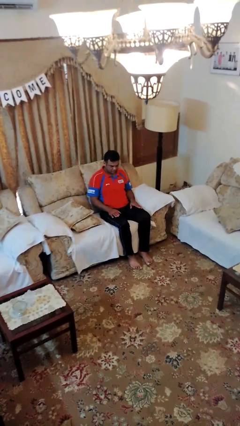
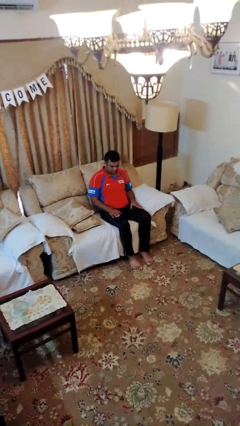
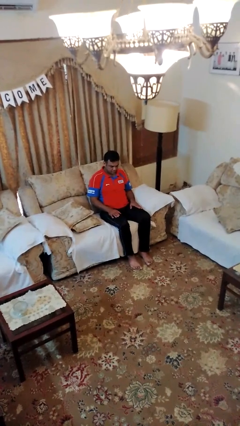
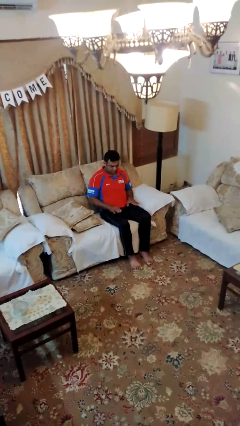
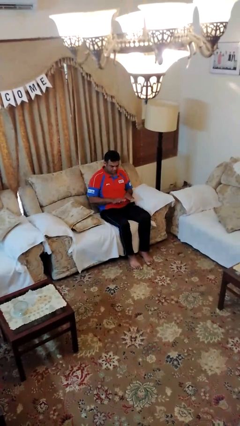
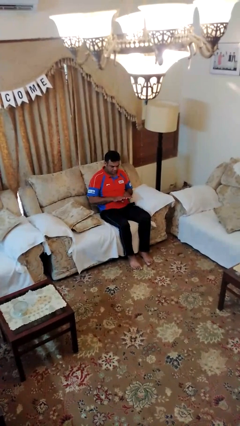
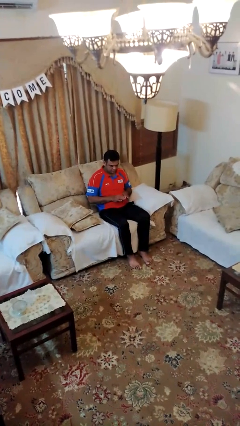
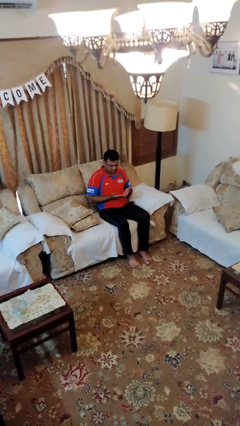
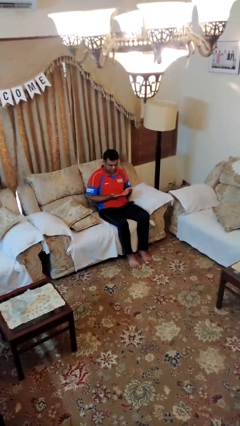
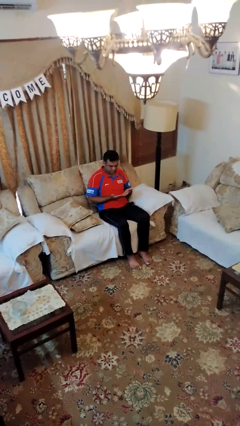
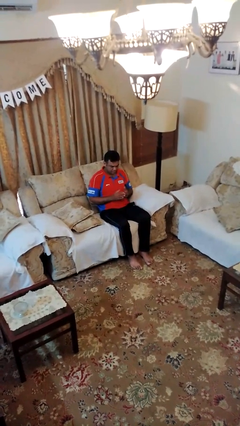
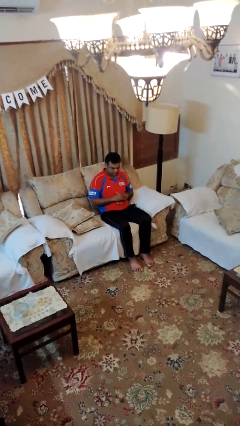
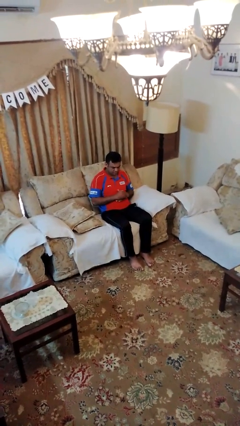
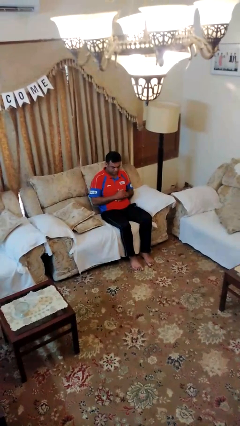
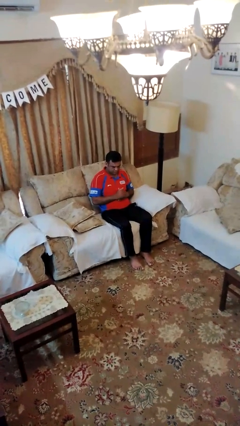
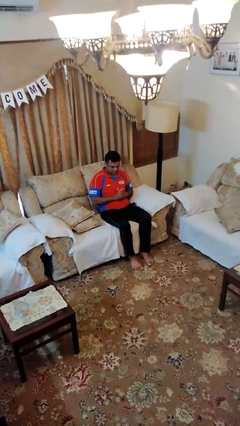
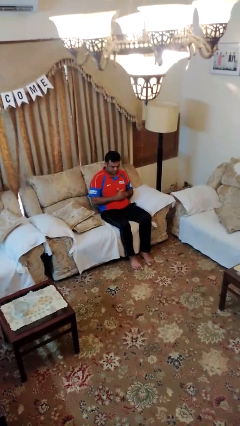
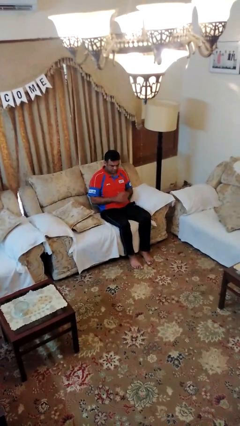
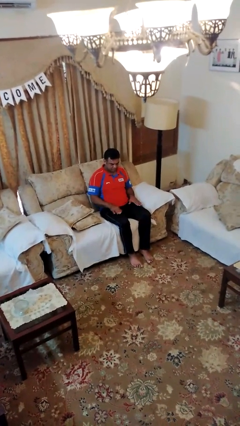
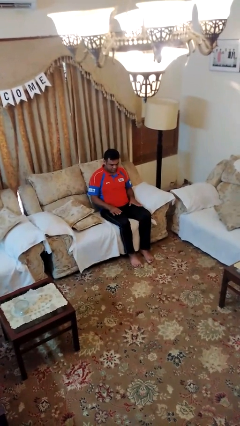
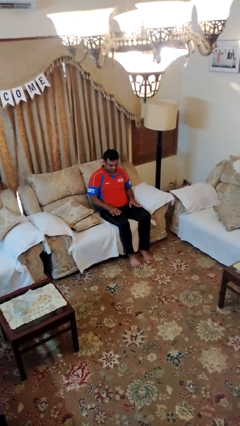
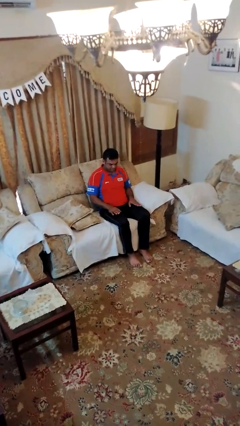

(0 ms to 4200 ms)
person looks at hands in lap

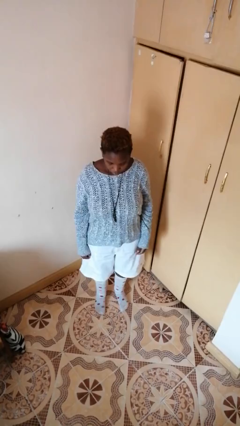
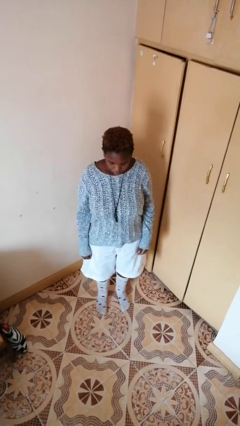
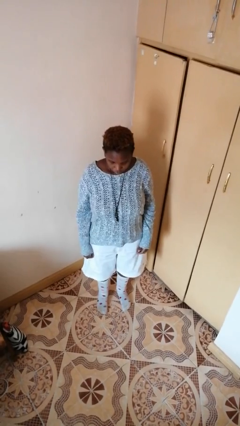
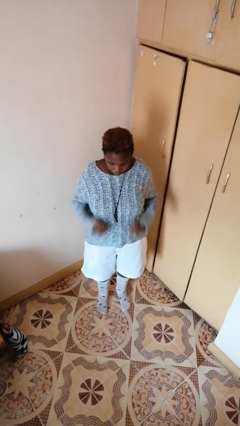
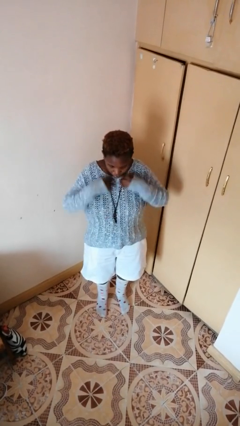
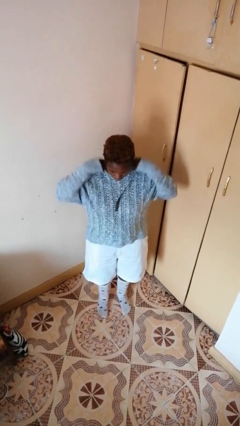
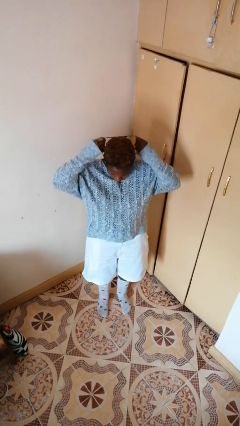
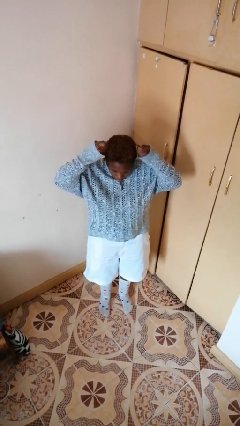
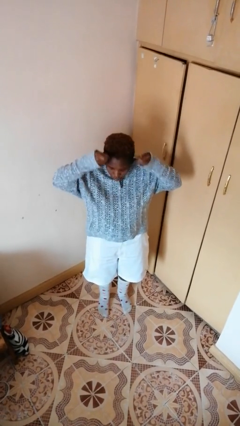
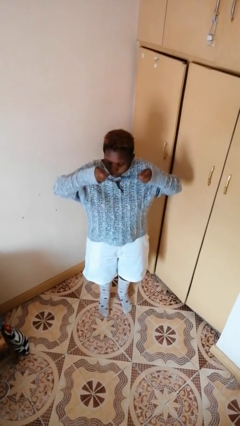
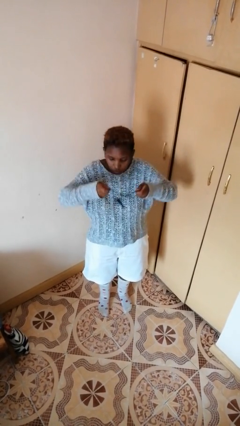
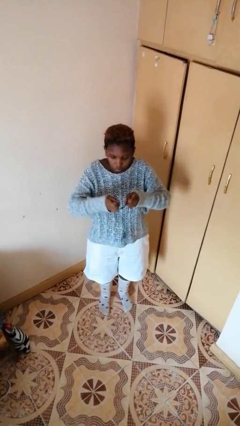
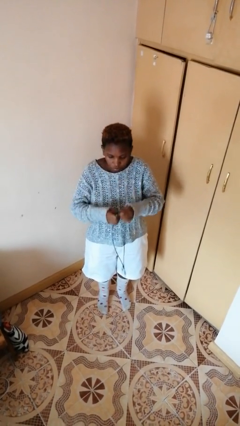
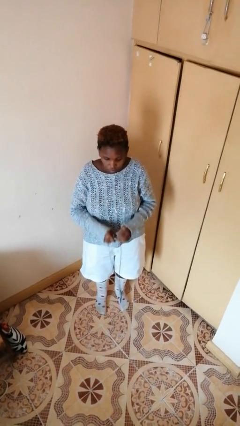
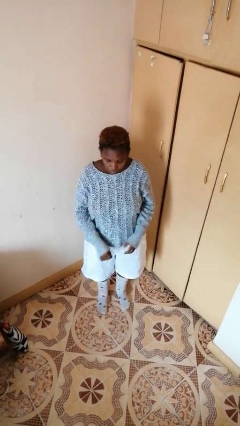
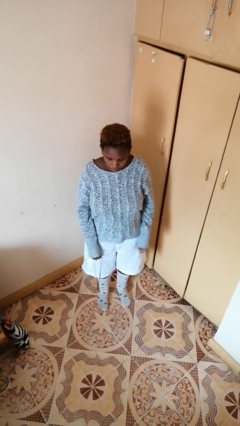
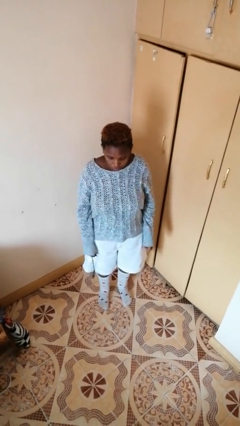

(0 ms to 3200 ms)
person takes off necklace

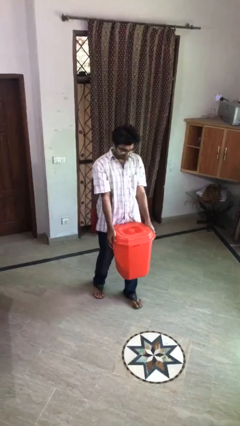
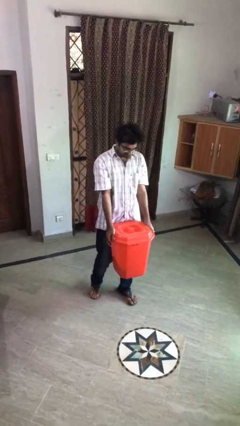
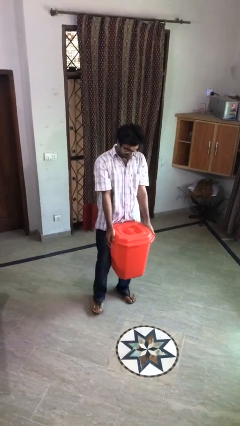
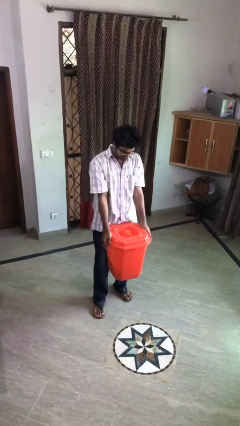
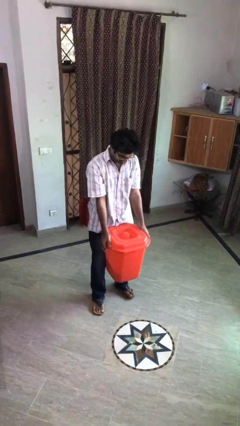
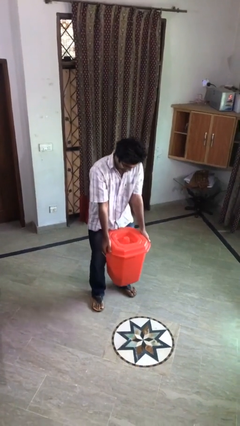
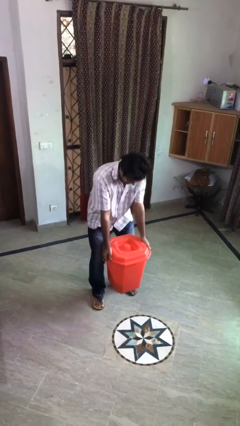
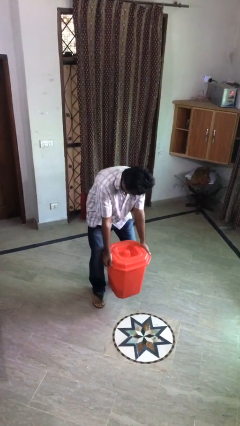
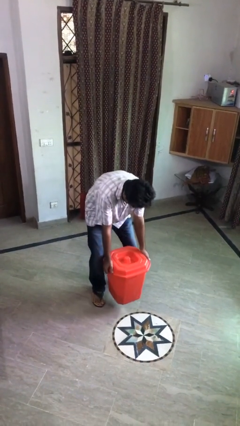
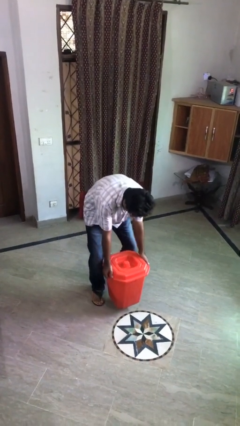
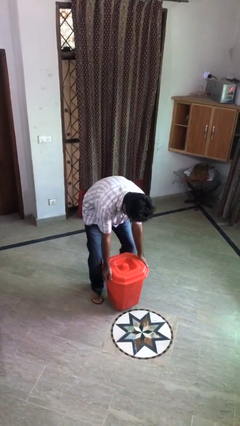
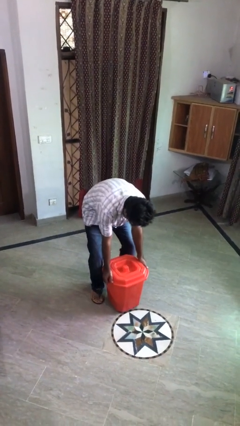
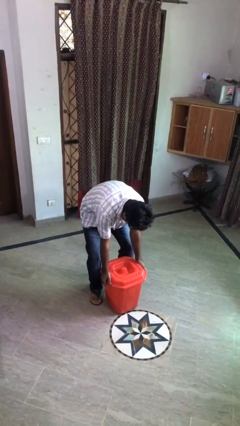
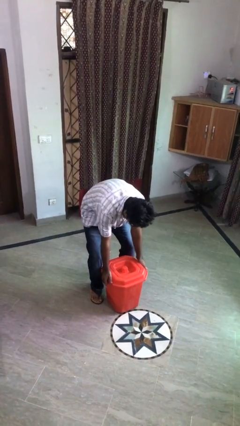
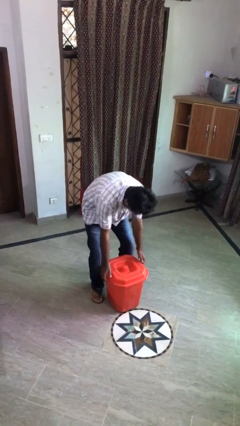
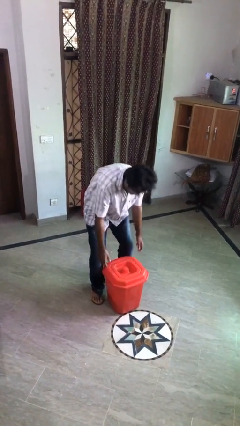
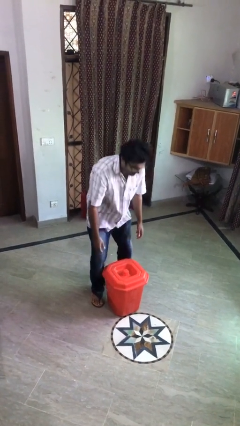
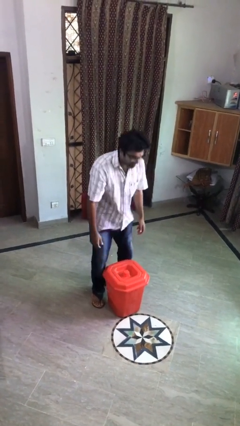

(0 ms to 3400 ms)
person puts down object on floor

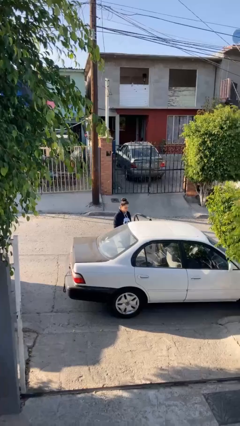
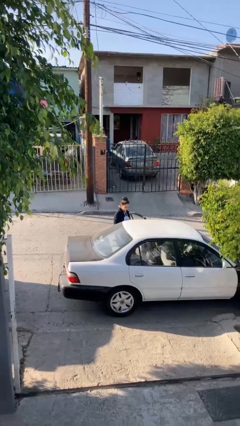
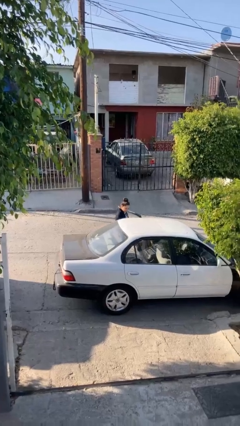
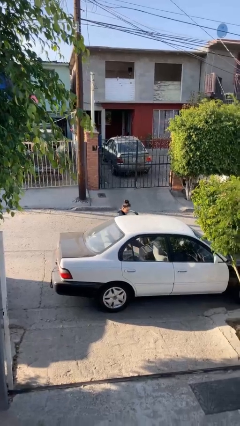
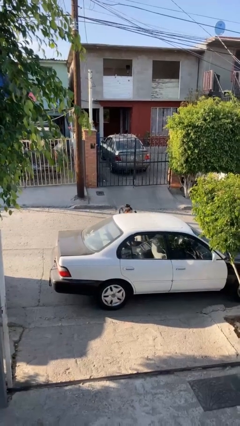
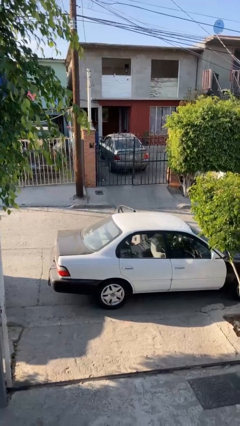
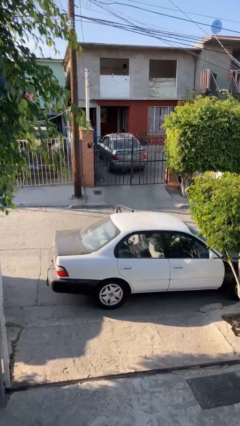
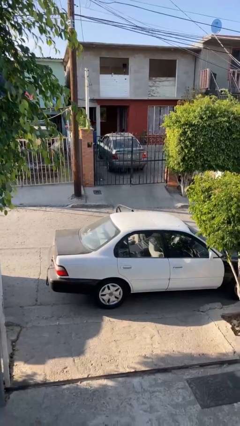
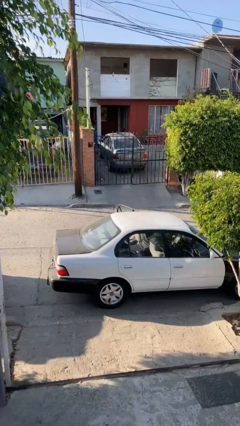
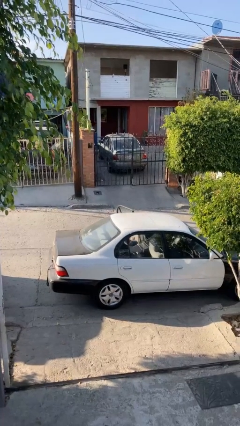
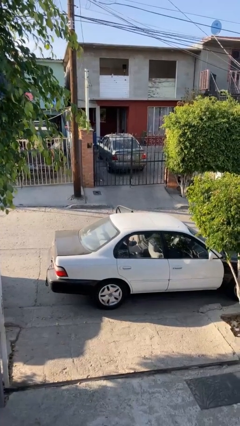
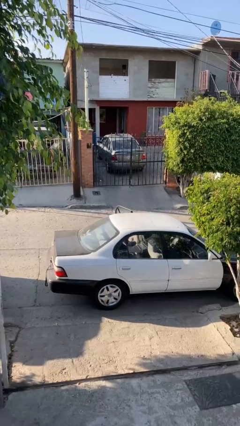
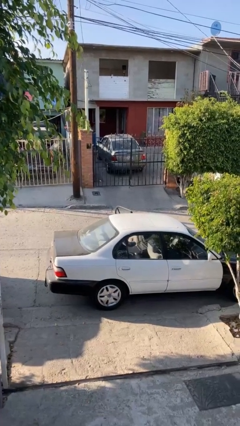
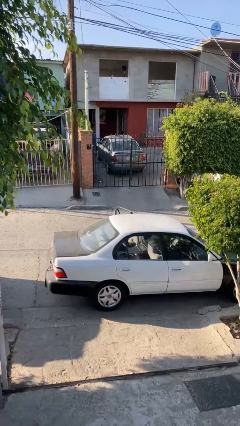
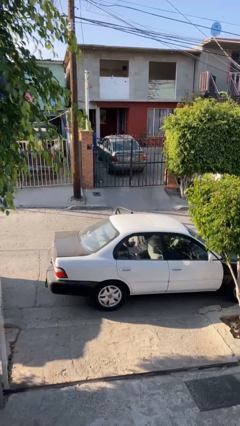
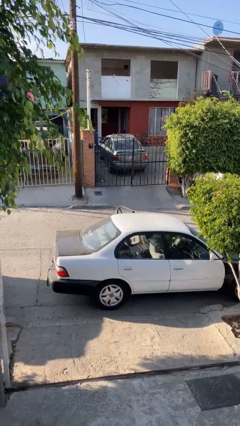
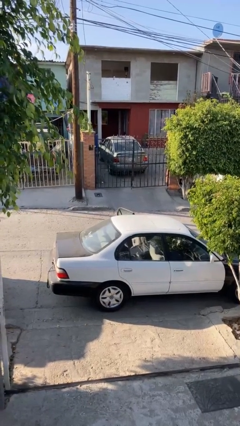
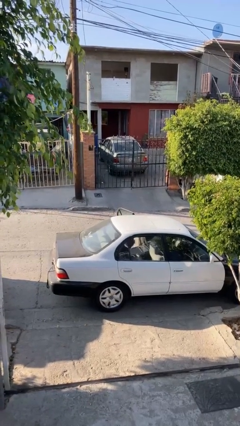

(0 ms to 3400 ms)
person enters car

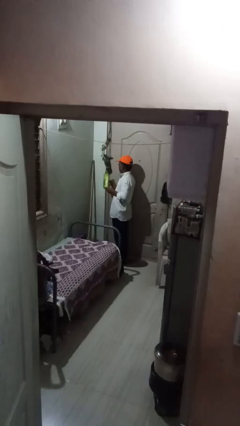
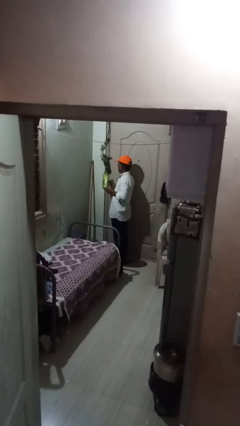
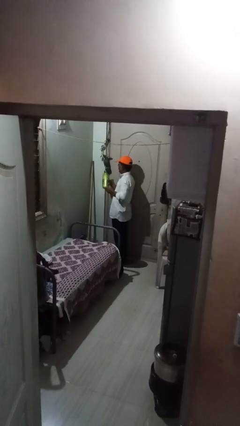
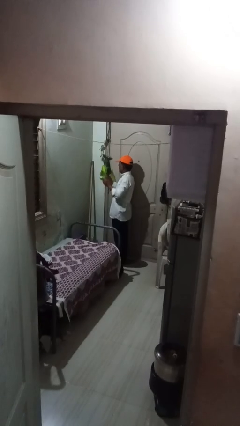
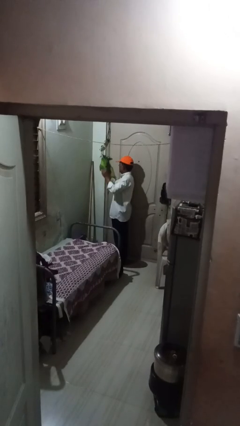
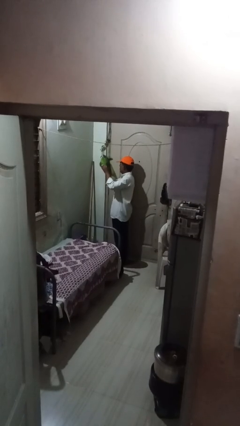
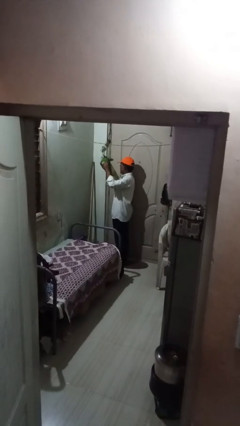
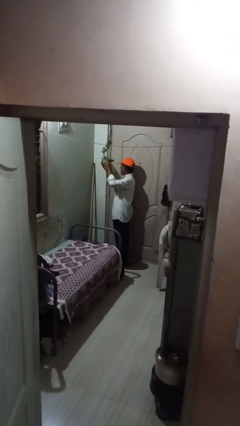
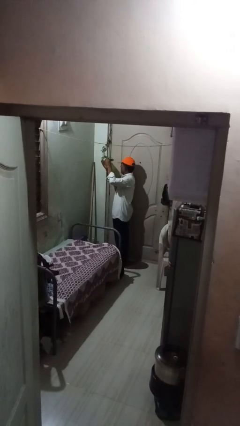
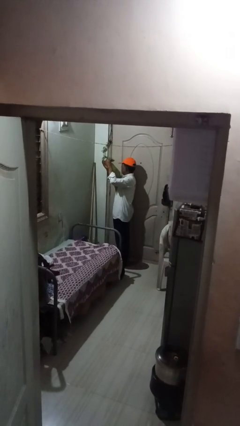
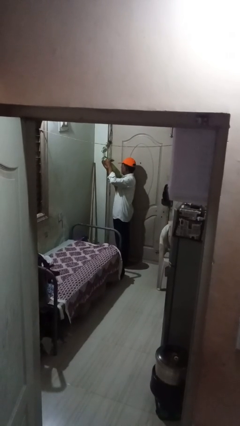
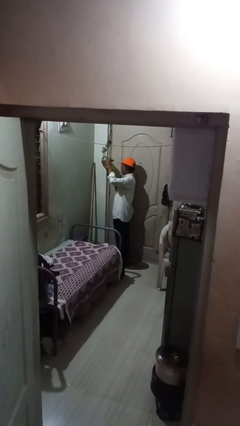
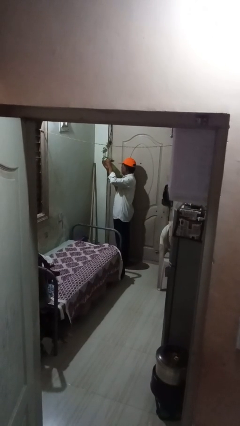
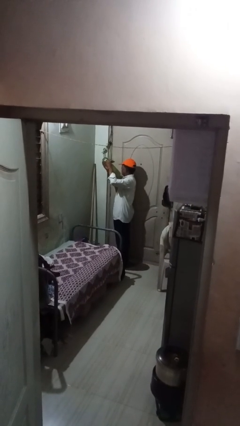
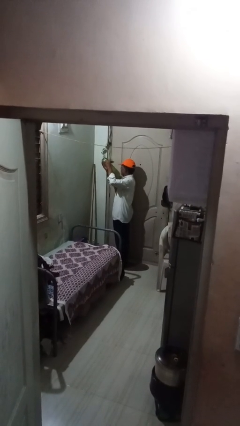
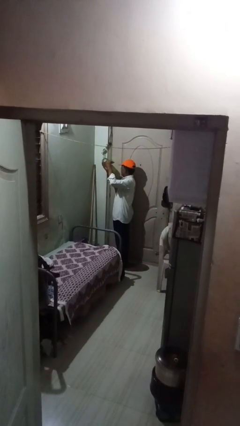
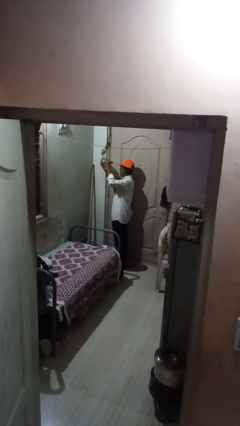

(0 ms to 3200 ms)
person waters houseplant

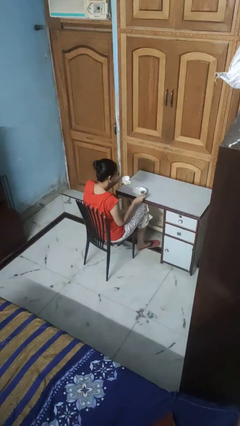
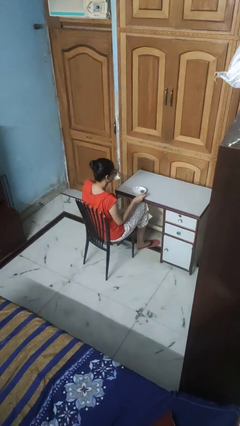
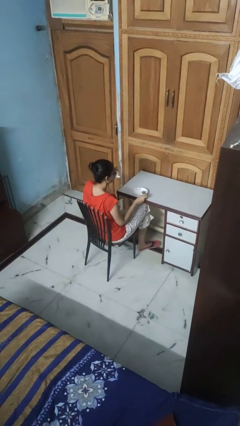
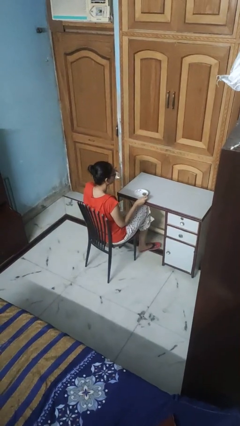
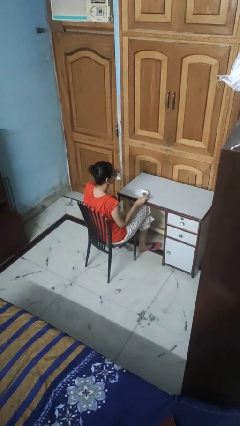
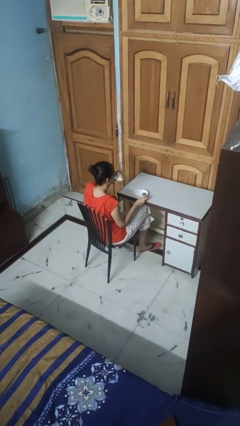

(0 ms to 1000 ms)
person drinks from mug
